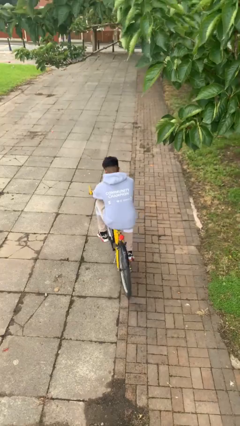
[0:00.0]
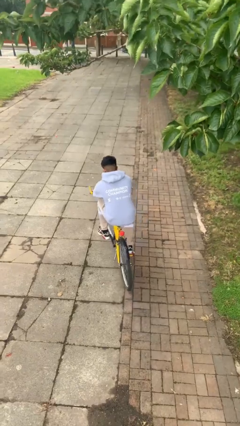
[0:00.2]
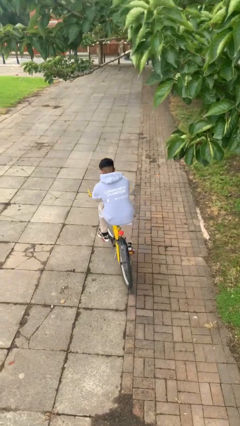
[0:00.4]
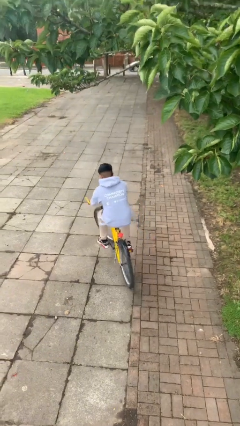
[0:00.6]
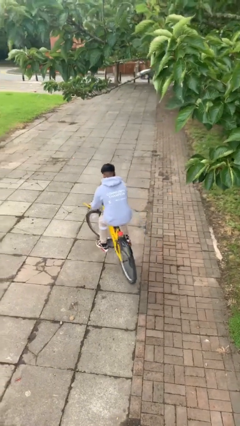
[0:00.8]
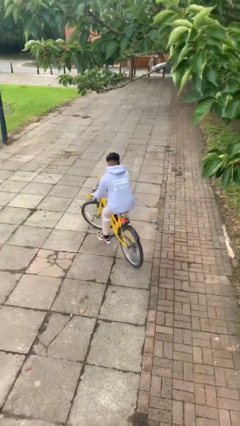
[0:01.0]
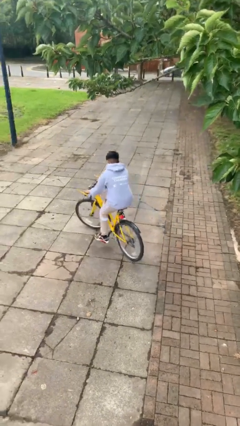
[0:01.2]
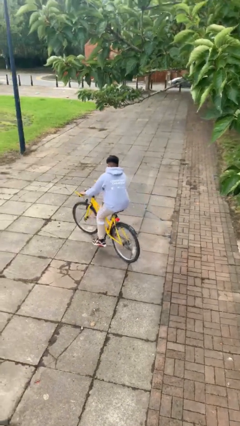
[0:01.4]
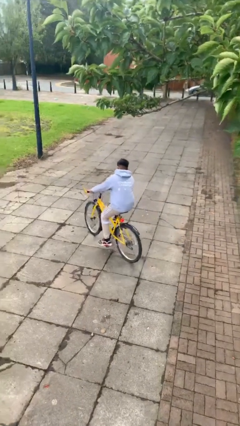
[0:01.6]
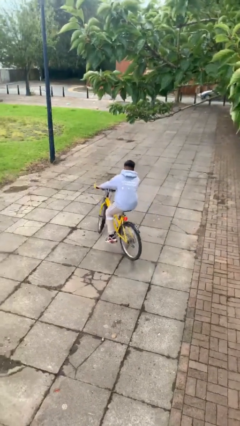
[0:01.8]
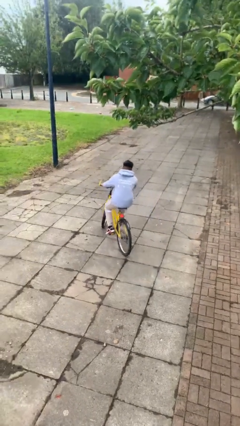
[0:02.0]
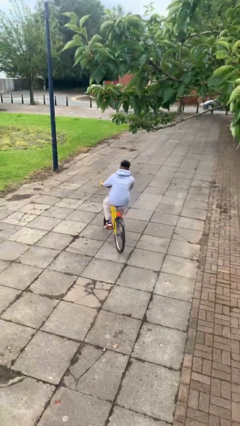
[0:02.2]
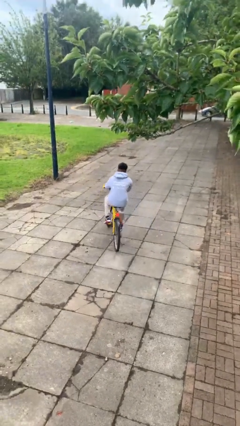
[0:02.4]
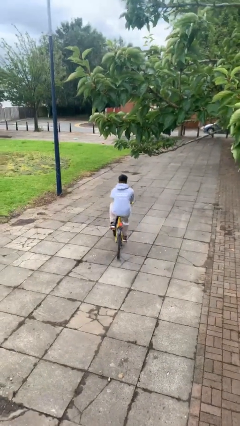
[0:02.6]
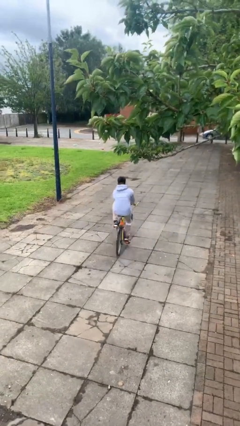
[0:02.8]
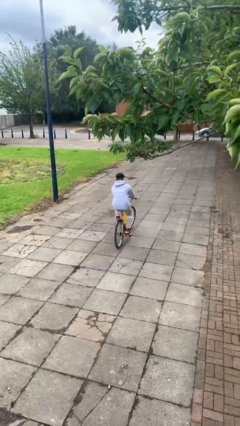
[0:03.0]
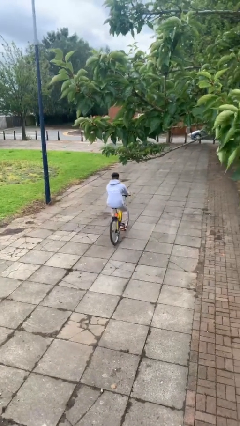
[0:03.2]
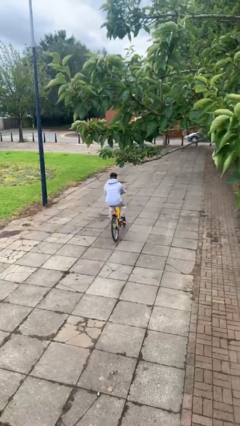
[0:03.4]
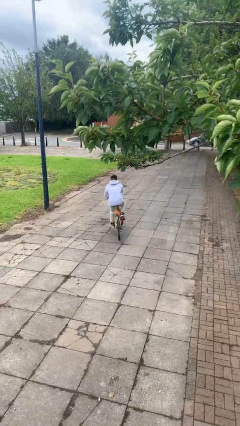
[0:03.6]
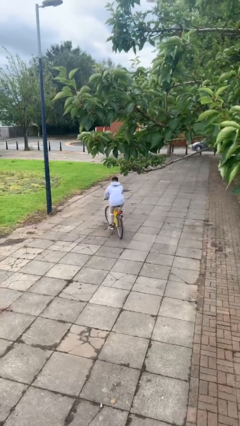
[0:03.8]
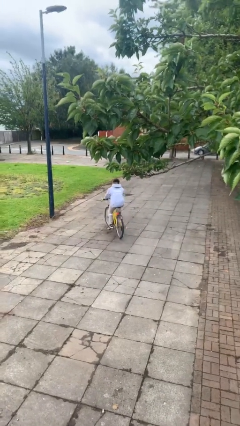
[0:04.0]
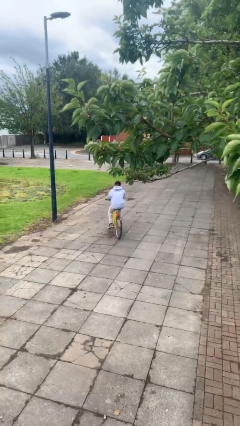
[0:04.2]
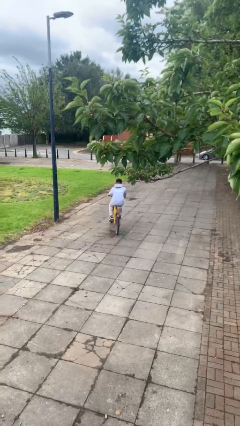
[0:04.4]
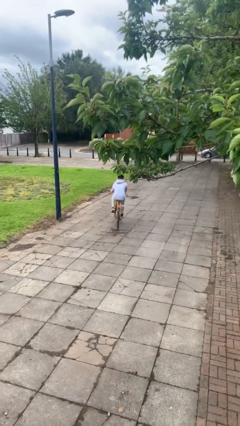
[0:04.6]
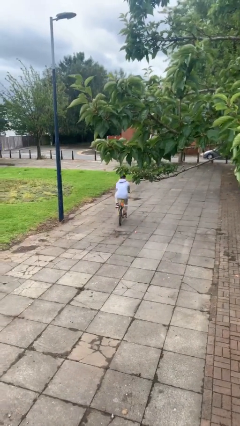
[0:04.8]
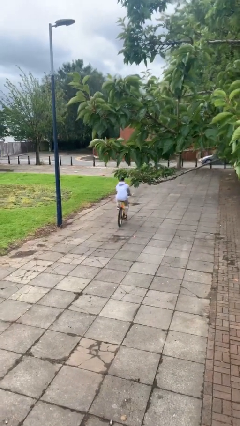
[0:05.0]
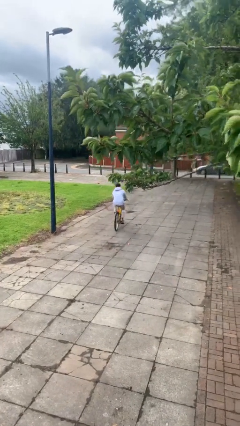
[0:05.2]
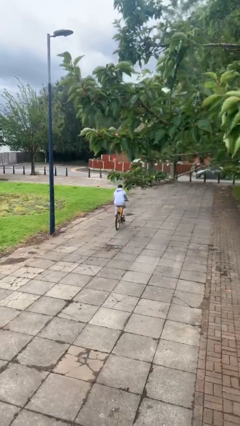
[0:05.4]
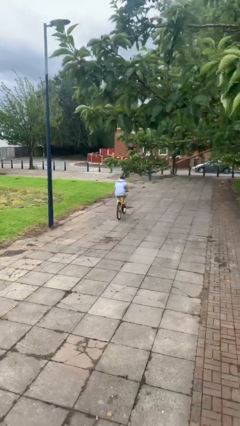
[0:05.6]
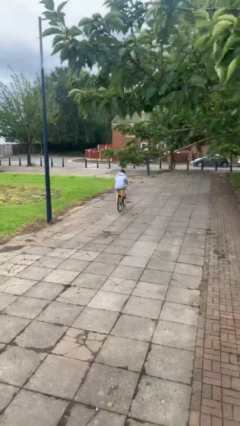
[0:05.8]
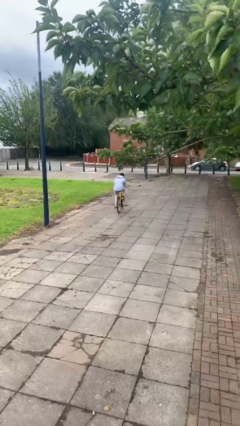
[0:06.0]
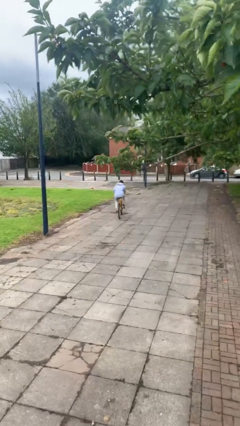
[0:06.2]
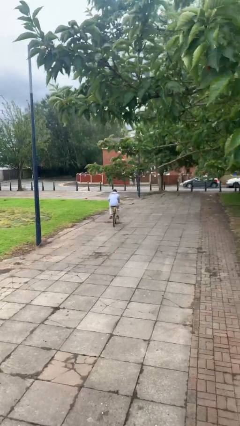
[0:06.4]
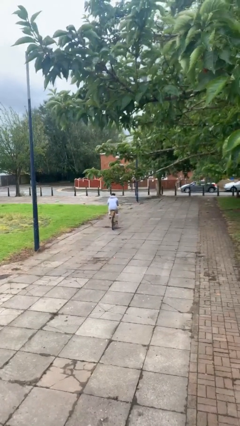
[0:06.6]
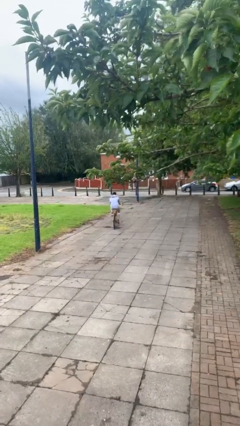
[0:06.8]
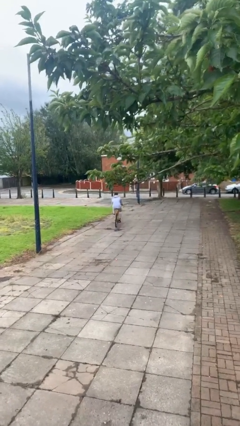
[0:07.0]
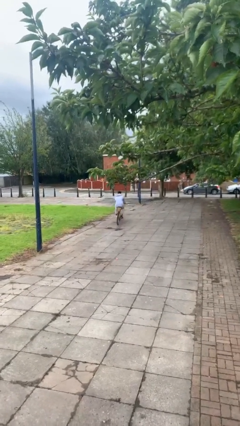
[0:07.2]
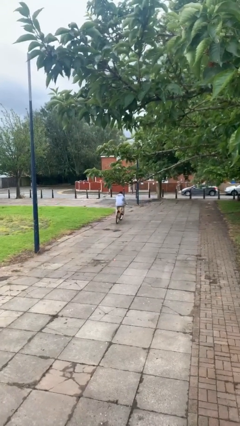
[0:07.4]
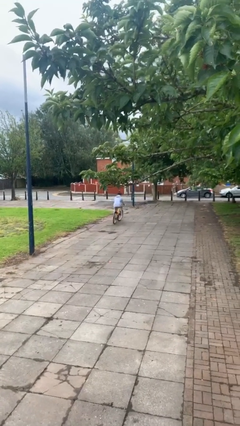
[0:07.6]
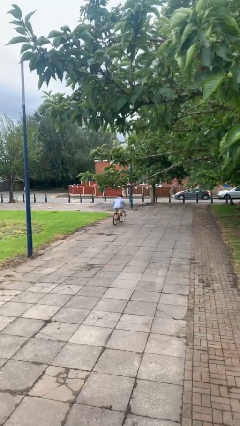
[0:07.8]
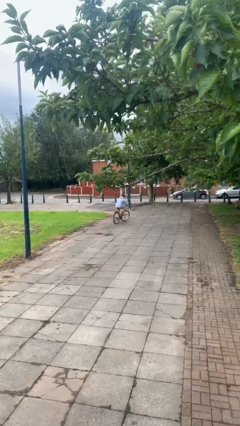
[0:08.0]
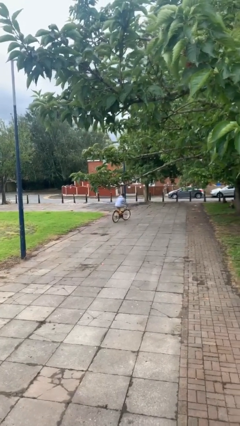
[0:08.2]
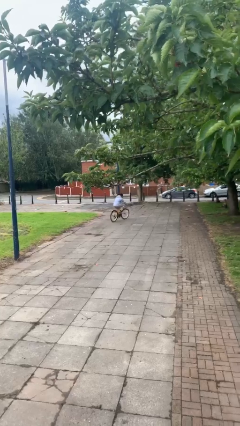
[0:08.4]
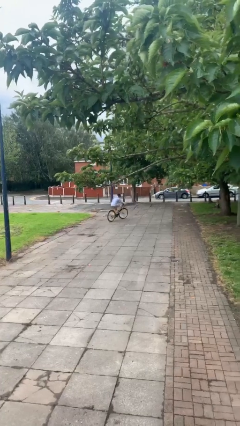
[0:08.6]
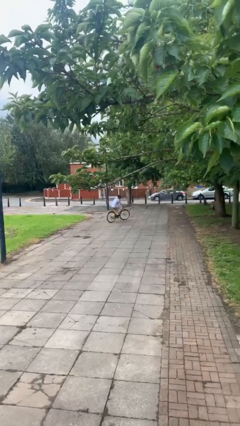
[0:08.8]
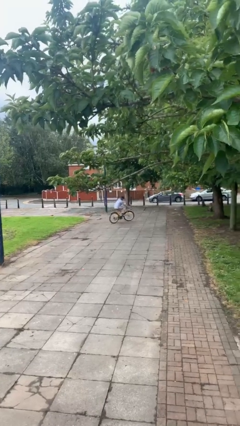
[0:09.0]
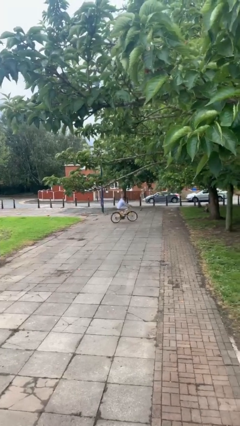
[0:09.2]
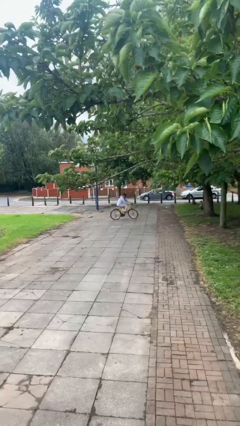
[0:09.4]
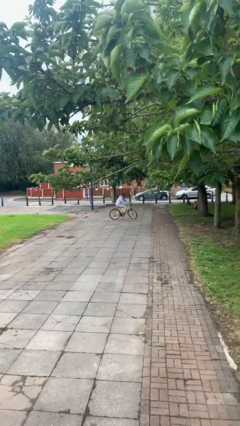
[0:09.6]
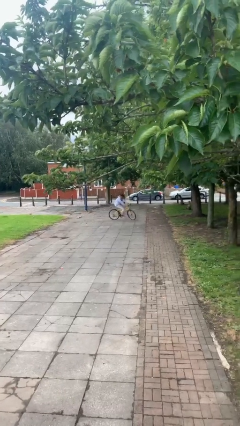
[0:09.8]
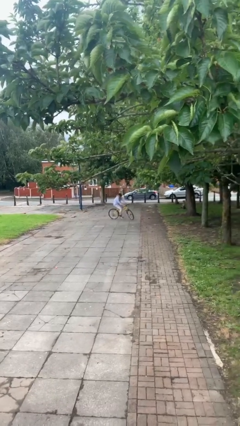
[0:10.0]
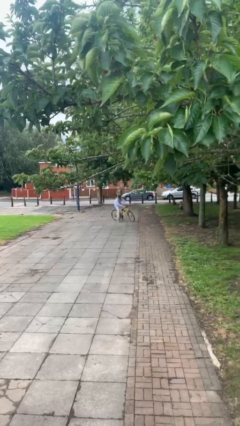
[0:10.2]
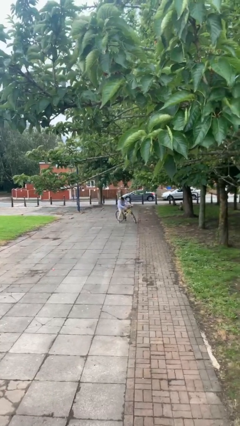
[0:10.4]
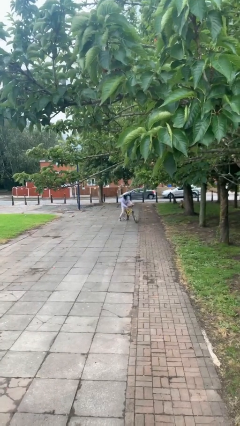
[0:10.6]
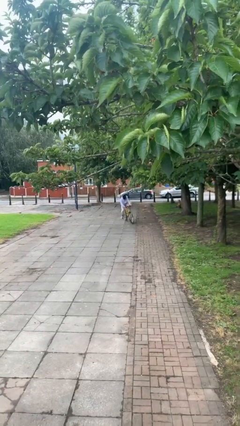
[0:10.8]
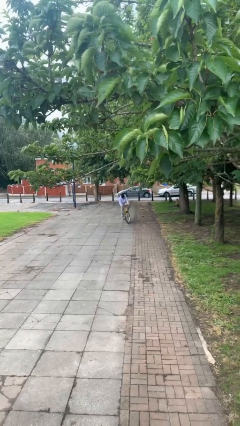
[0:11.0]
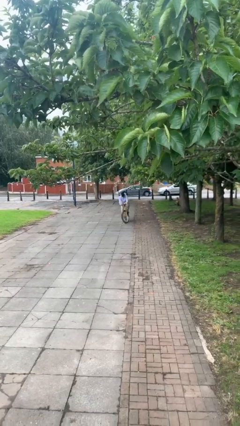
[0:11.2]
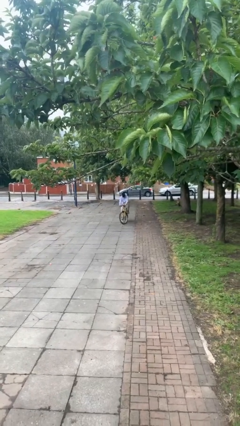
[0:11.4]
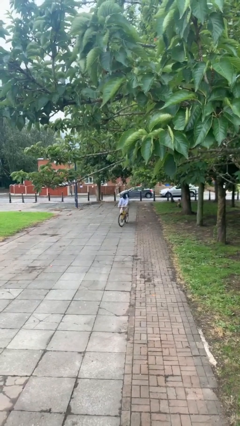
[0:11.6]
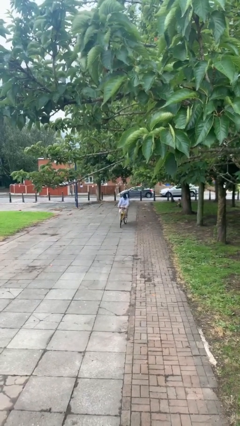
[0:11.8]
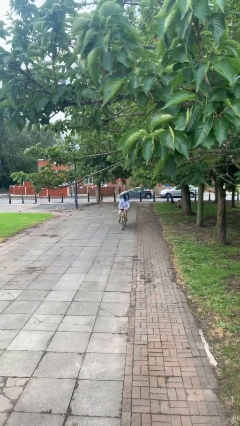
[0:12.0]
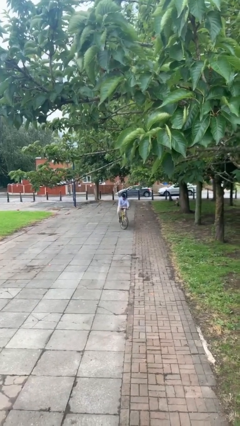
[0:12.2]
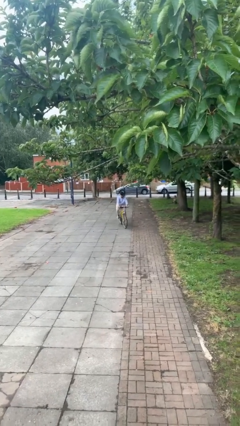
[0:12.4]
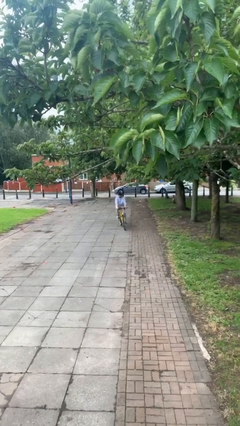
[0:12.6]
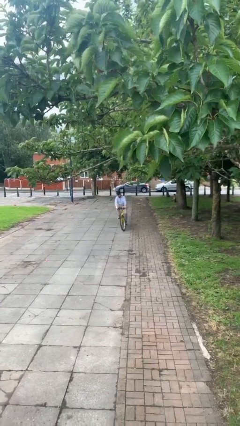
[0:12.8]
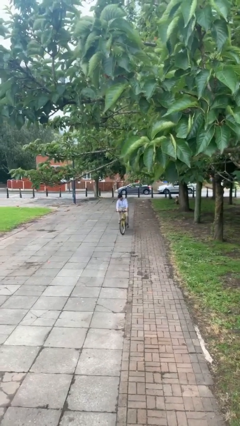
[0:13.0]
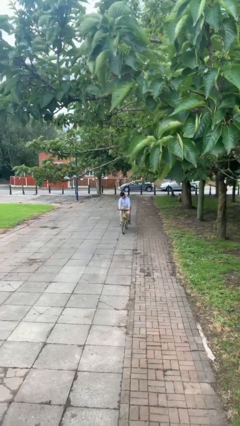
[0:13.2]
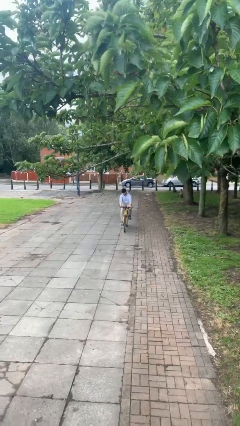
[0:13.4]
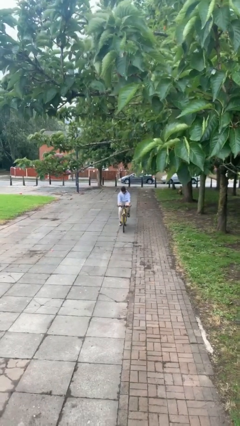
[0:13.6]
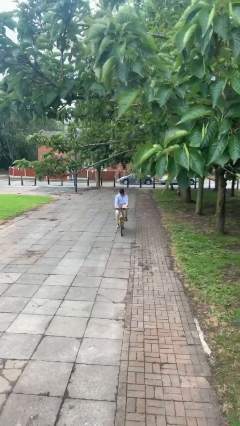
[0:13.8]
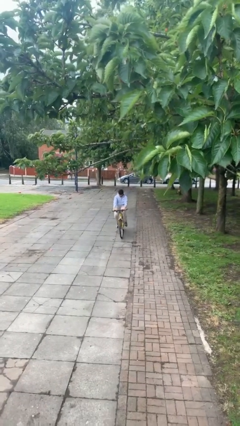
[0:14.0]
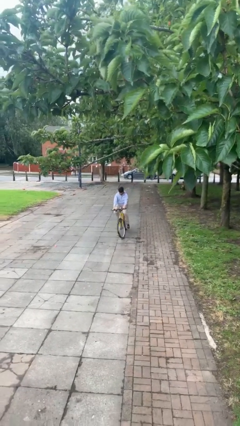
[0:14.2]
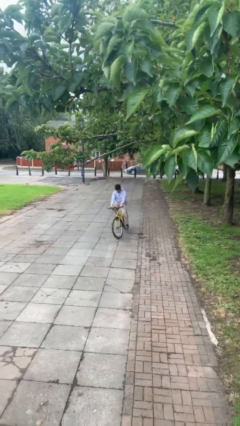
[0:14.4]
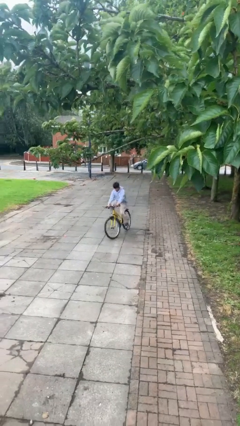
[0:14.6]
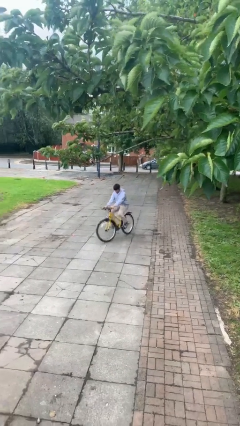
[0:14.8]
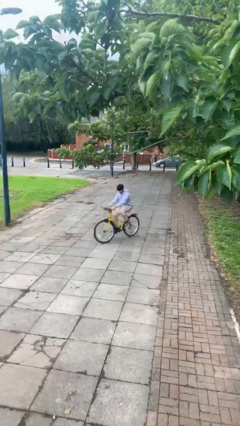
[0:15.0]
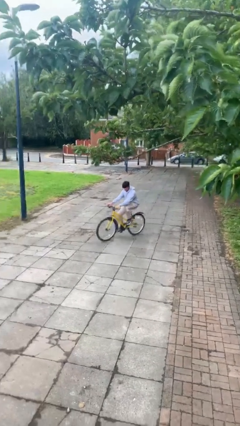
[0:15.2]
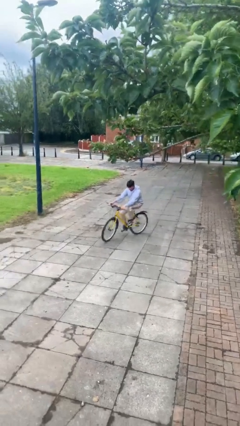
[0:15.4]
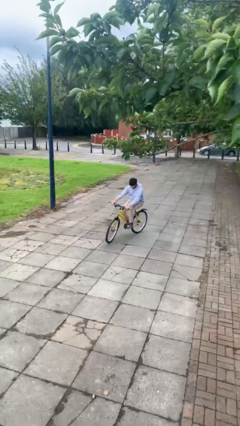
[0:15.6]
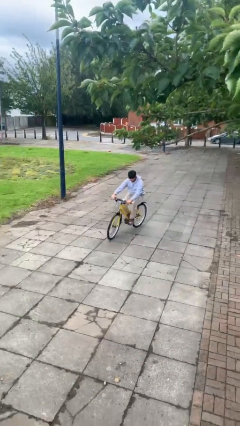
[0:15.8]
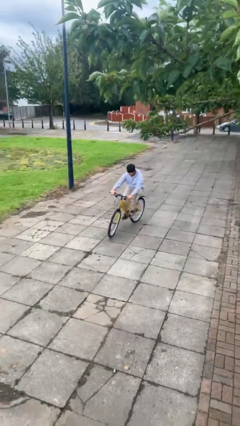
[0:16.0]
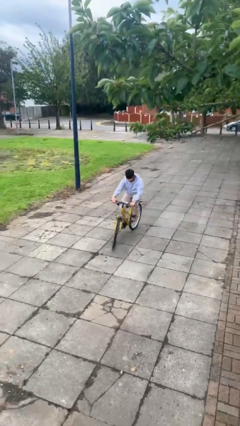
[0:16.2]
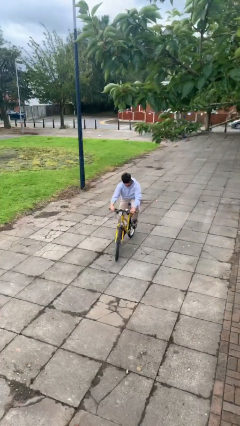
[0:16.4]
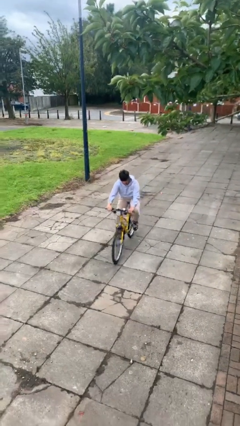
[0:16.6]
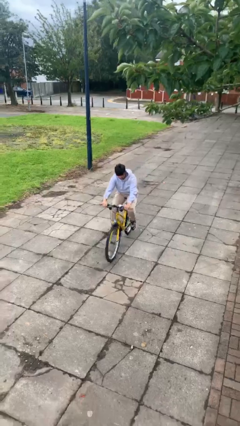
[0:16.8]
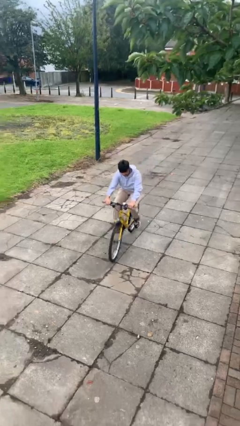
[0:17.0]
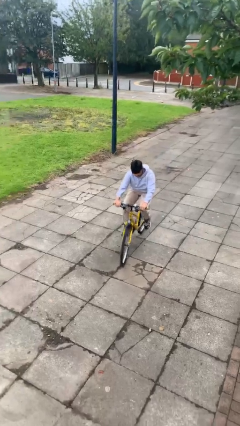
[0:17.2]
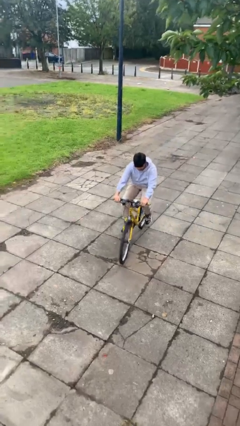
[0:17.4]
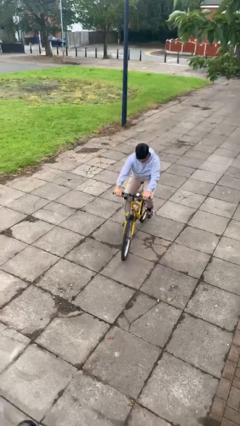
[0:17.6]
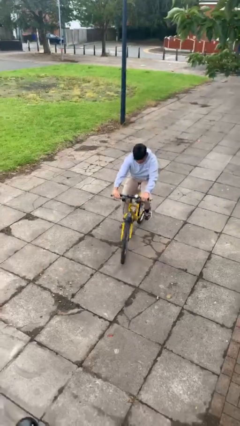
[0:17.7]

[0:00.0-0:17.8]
person rides bicycle

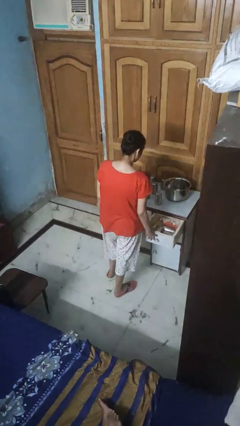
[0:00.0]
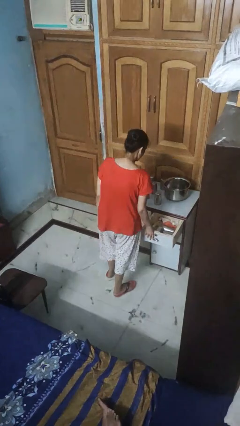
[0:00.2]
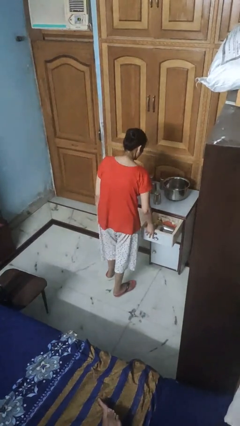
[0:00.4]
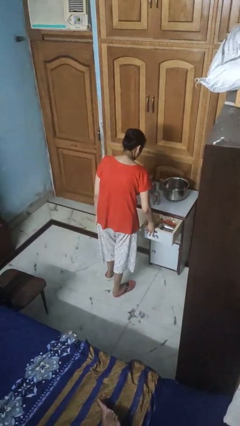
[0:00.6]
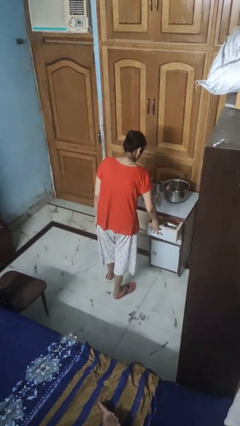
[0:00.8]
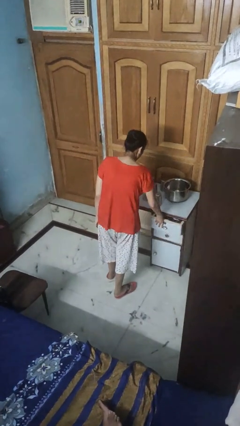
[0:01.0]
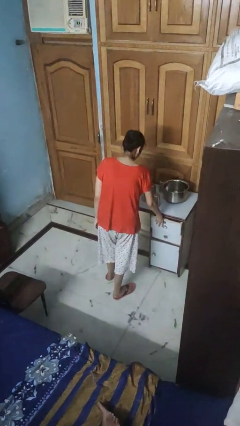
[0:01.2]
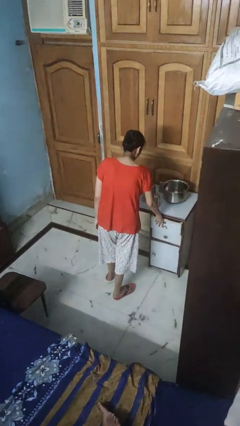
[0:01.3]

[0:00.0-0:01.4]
person closes kitchen drawer
